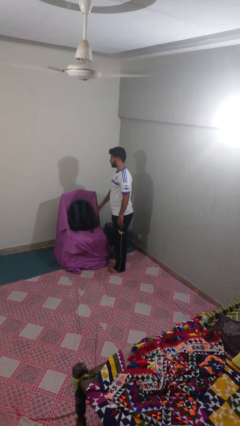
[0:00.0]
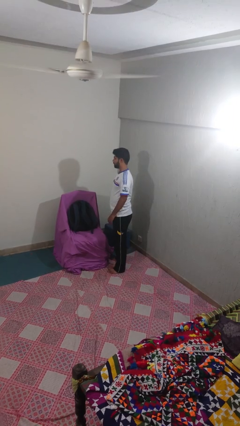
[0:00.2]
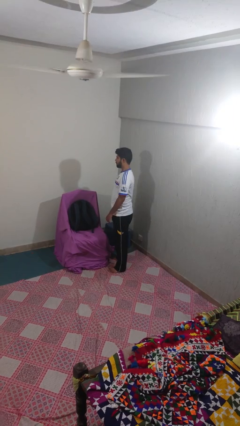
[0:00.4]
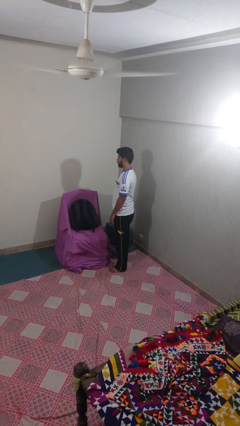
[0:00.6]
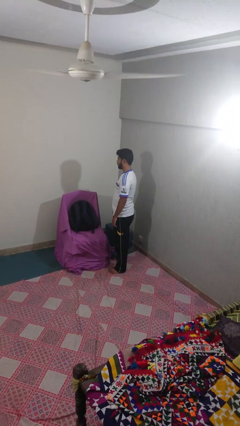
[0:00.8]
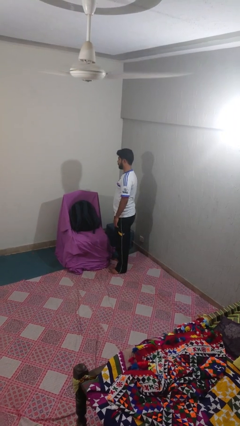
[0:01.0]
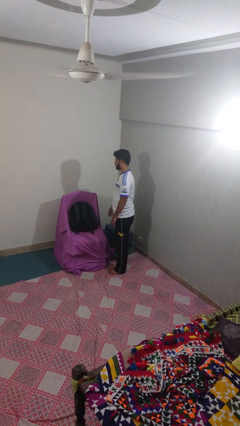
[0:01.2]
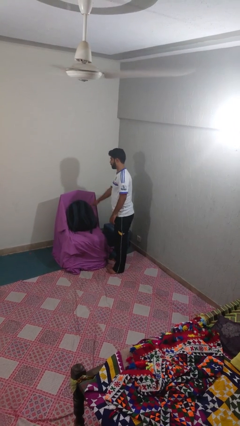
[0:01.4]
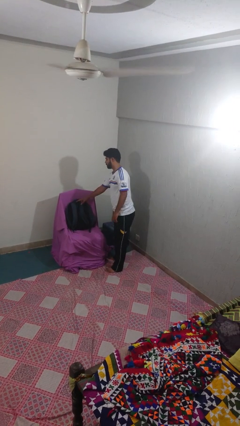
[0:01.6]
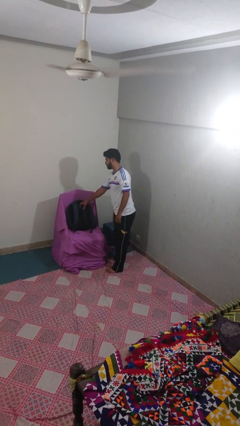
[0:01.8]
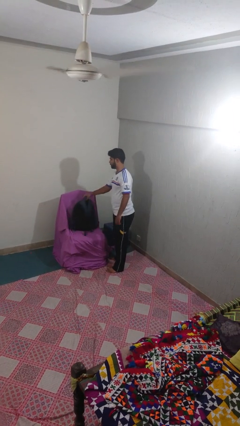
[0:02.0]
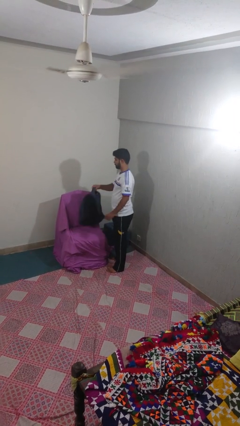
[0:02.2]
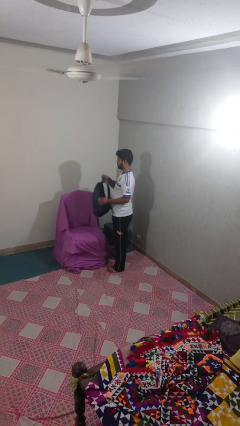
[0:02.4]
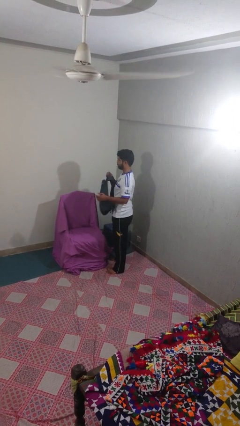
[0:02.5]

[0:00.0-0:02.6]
person picks up object from couch

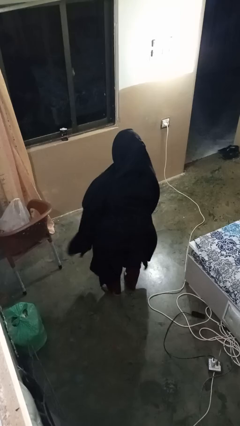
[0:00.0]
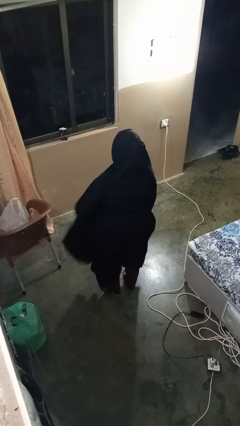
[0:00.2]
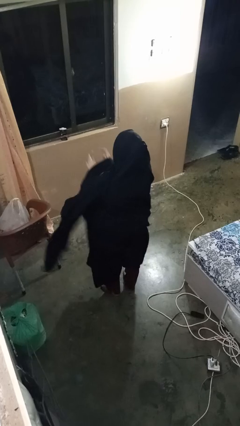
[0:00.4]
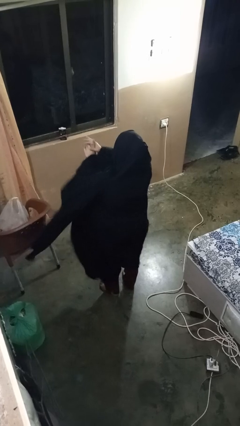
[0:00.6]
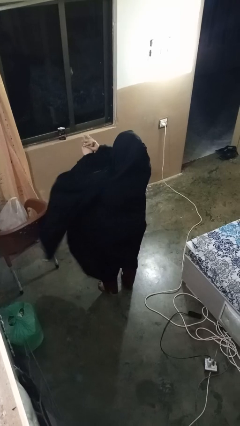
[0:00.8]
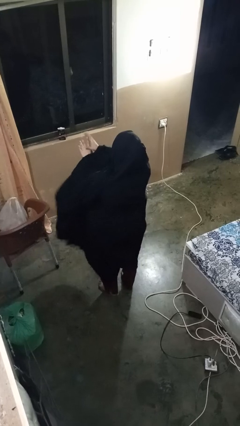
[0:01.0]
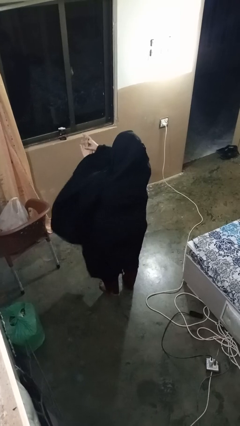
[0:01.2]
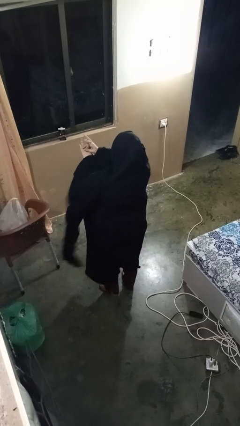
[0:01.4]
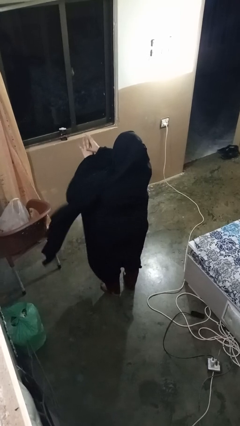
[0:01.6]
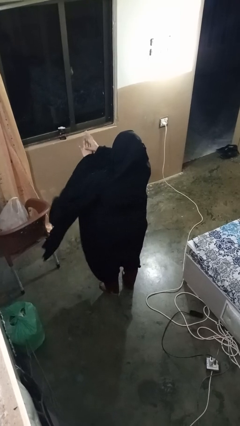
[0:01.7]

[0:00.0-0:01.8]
person cracks knuckles

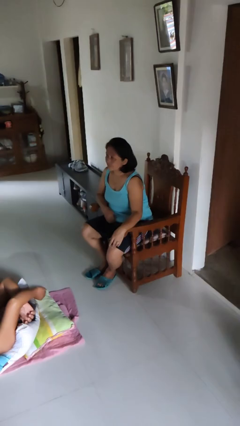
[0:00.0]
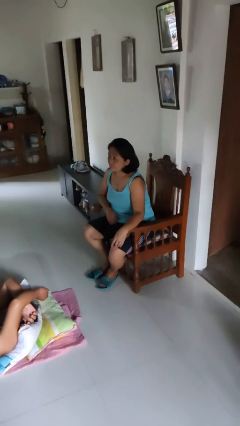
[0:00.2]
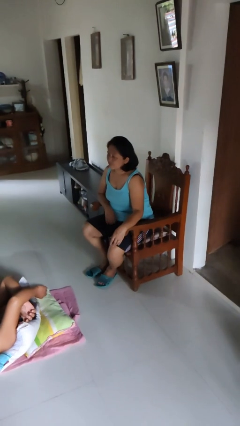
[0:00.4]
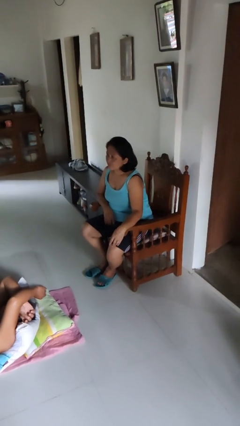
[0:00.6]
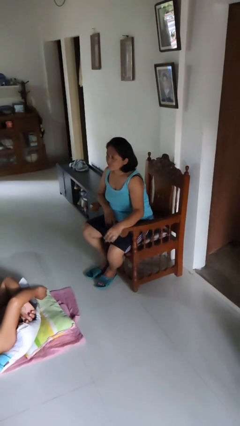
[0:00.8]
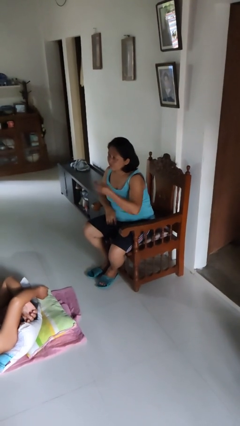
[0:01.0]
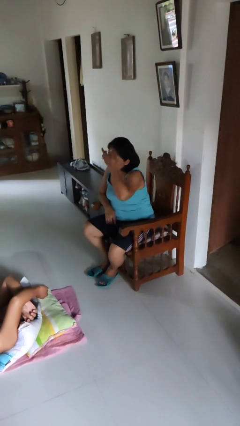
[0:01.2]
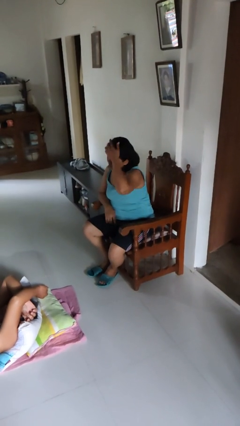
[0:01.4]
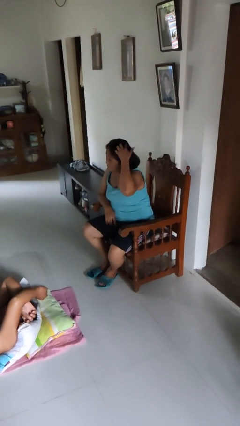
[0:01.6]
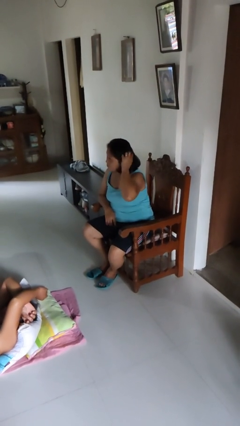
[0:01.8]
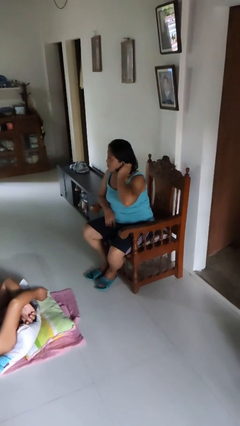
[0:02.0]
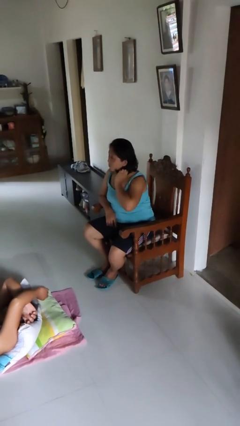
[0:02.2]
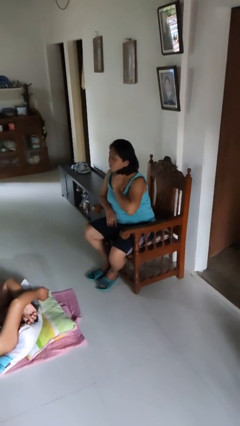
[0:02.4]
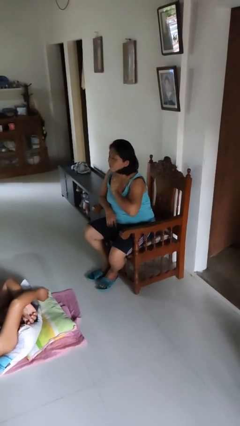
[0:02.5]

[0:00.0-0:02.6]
person strokes hair

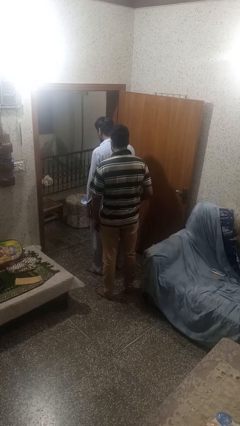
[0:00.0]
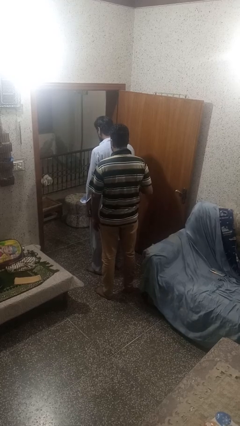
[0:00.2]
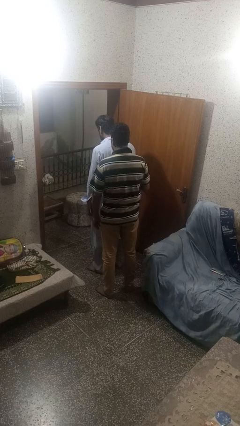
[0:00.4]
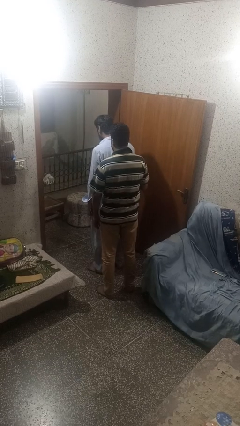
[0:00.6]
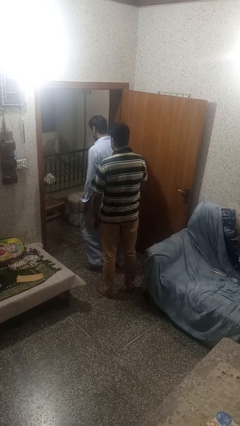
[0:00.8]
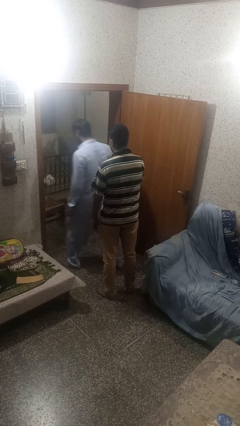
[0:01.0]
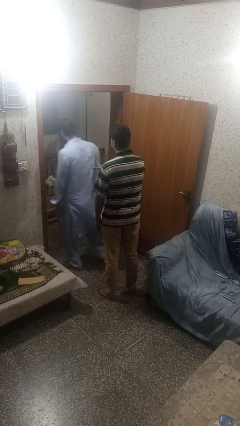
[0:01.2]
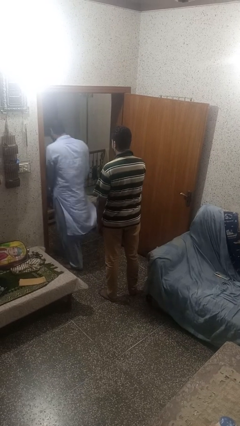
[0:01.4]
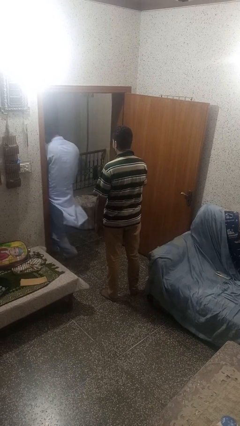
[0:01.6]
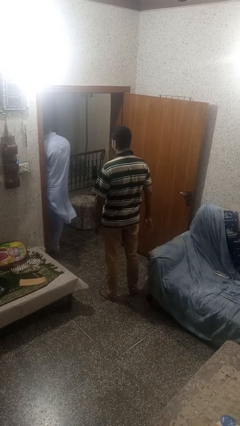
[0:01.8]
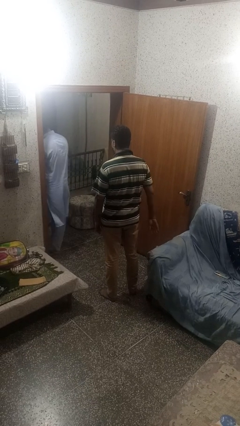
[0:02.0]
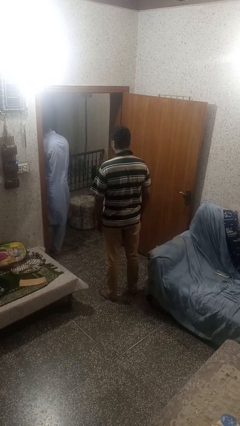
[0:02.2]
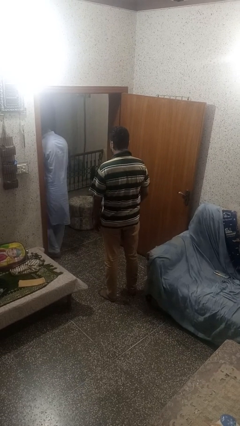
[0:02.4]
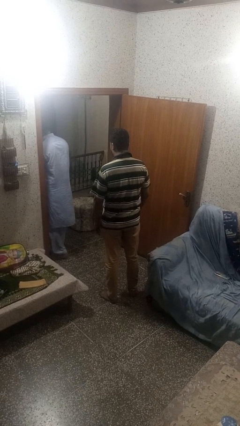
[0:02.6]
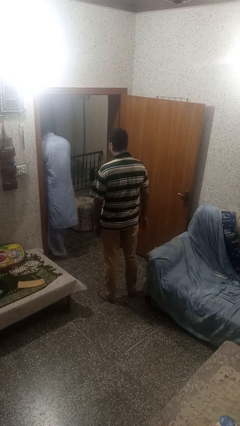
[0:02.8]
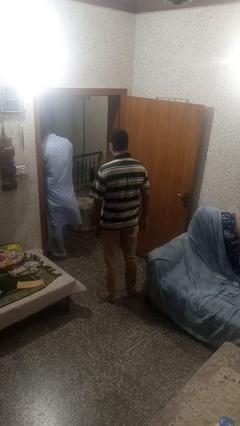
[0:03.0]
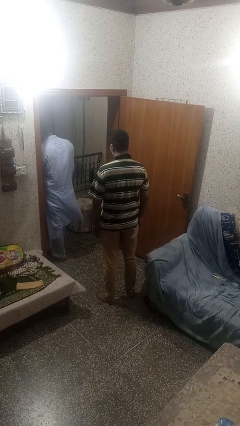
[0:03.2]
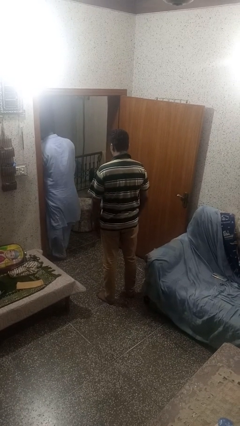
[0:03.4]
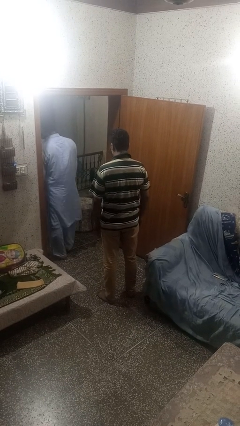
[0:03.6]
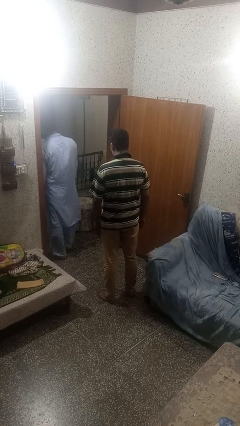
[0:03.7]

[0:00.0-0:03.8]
person shoves person

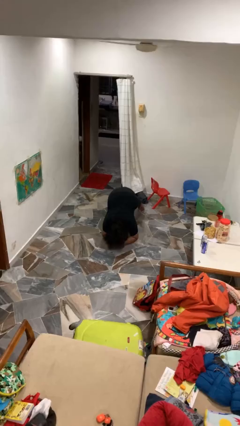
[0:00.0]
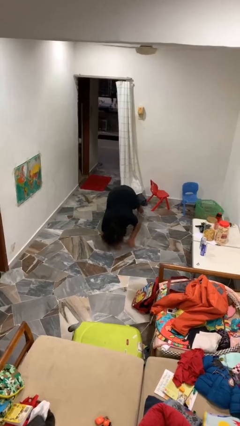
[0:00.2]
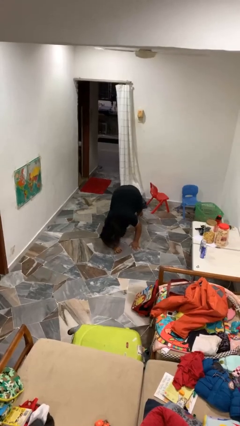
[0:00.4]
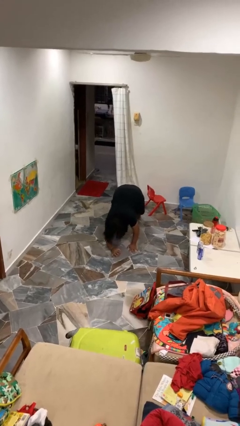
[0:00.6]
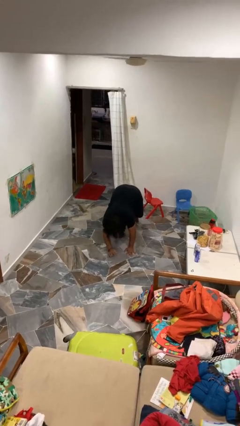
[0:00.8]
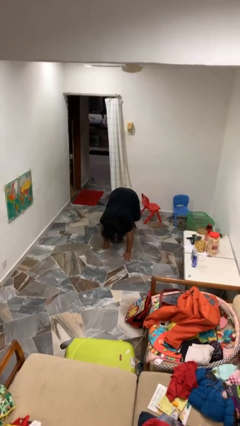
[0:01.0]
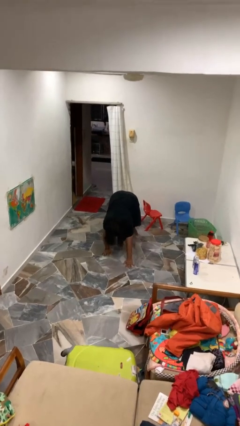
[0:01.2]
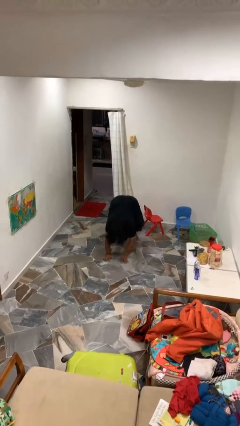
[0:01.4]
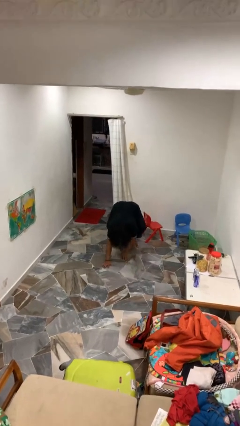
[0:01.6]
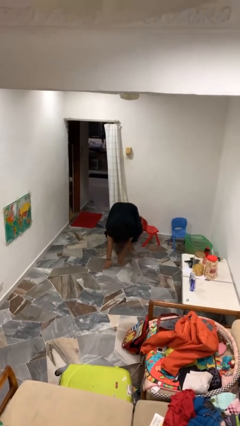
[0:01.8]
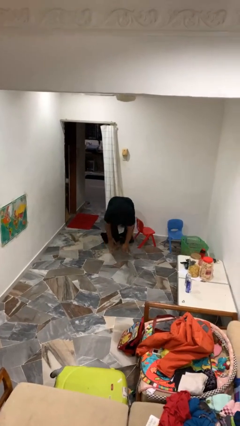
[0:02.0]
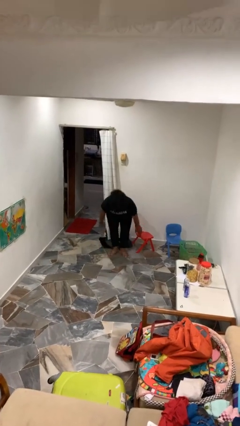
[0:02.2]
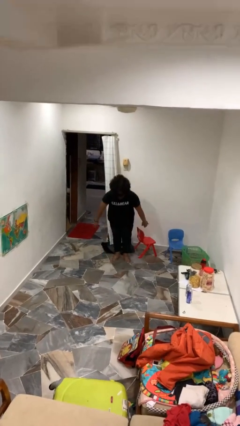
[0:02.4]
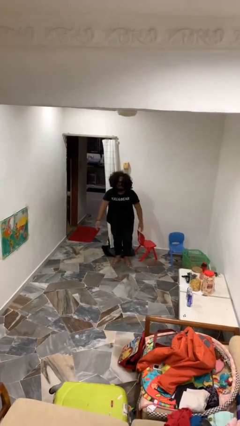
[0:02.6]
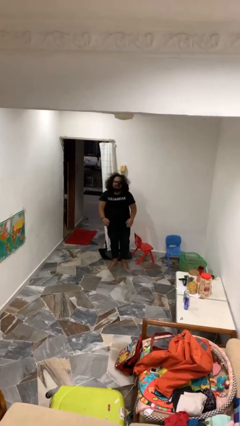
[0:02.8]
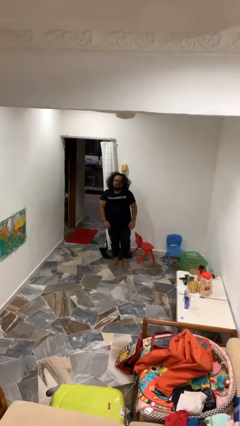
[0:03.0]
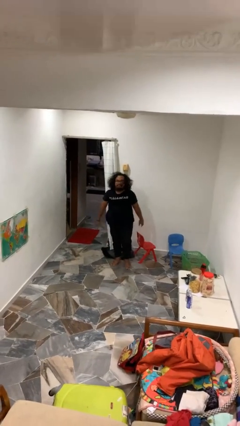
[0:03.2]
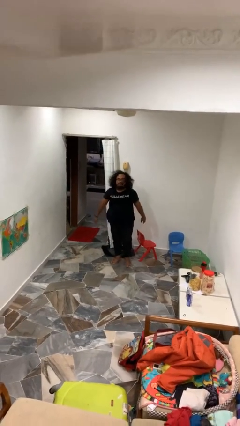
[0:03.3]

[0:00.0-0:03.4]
person stands up from floor

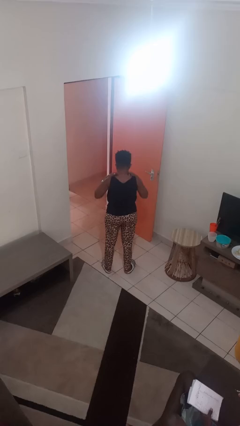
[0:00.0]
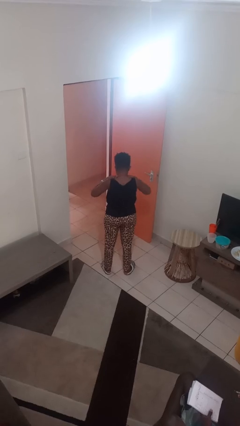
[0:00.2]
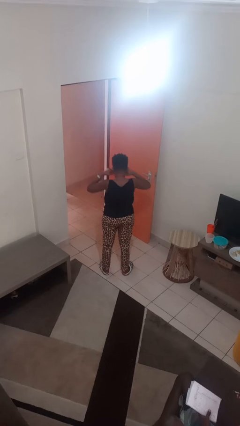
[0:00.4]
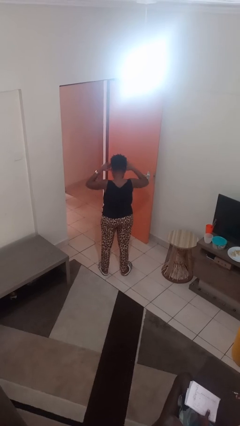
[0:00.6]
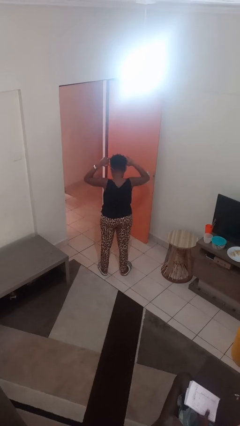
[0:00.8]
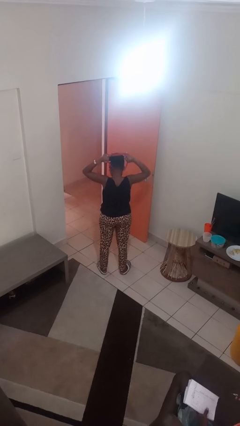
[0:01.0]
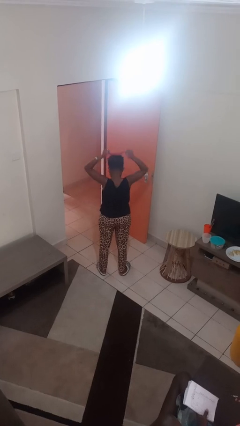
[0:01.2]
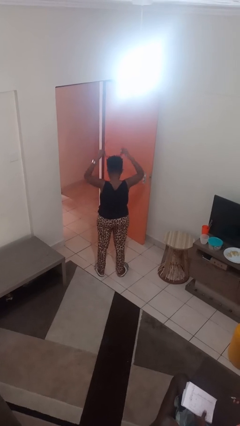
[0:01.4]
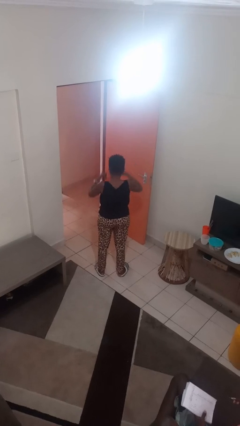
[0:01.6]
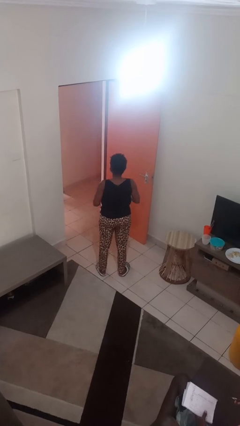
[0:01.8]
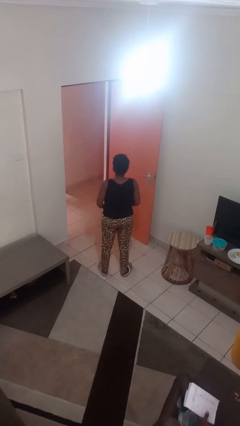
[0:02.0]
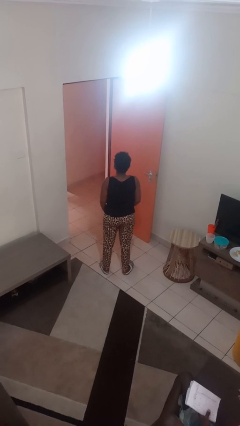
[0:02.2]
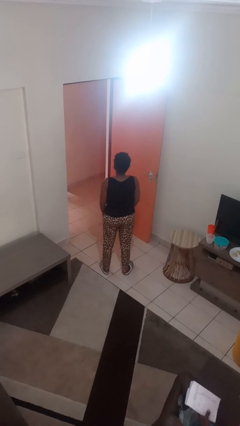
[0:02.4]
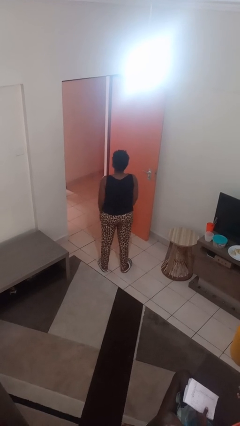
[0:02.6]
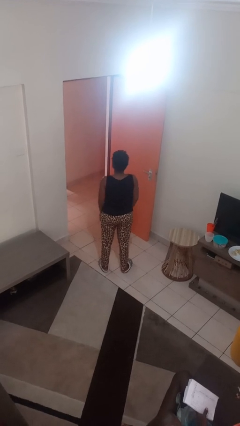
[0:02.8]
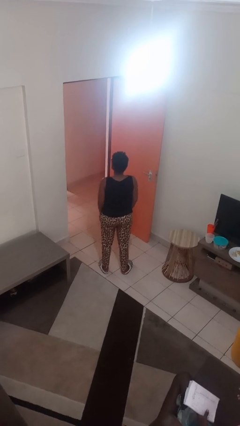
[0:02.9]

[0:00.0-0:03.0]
person takes off necklace

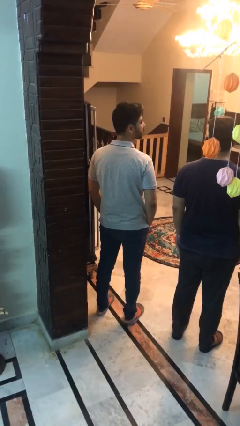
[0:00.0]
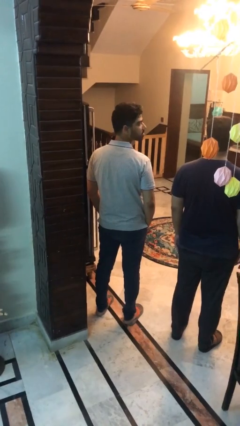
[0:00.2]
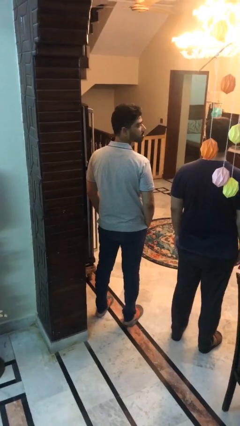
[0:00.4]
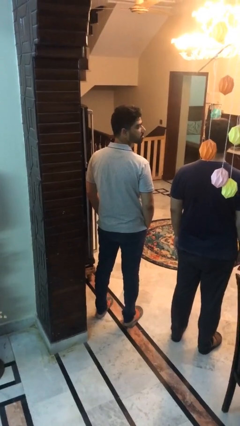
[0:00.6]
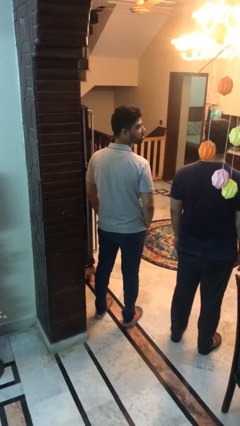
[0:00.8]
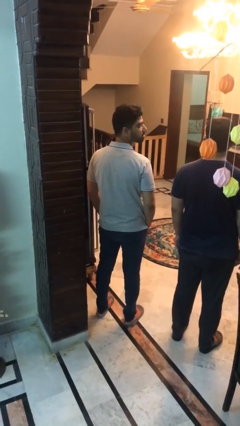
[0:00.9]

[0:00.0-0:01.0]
person looks over shoulder
